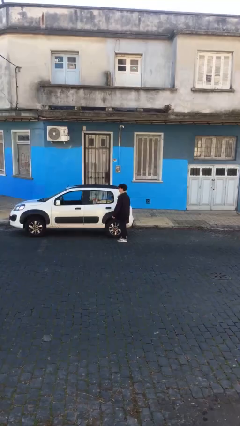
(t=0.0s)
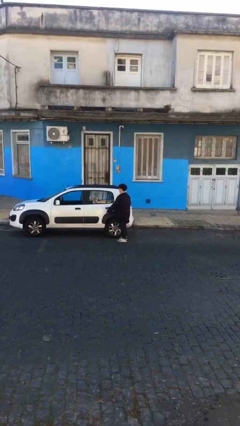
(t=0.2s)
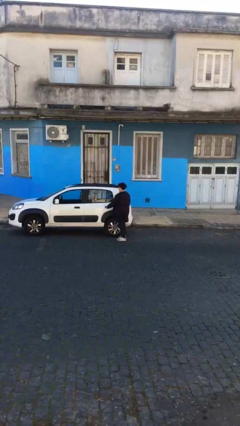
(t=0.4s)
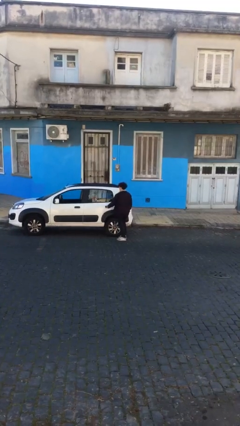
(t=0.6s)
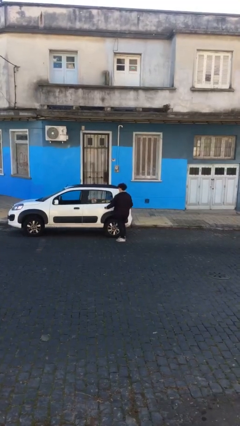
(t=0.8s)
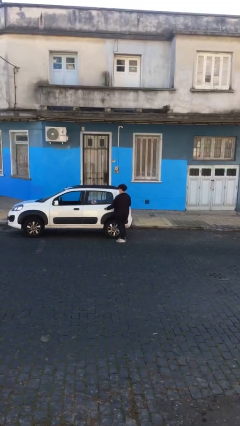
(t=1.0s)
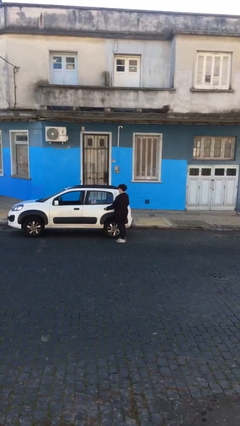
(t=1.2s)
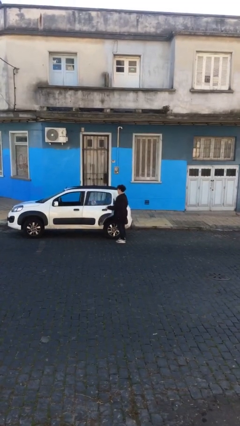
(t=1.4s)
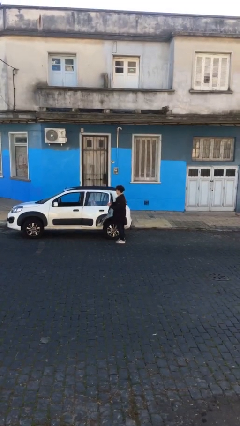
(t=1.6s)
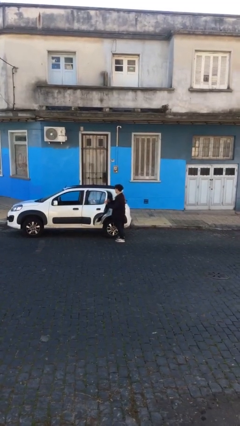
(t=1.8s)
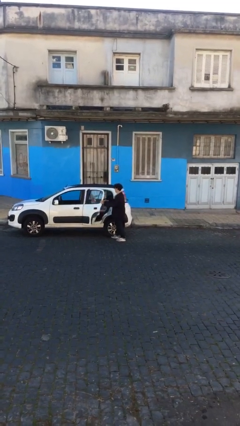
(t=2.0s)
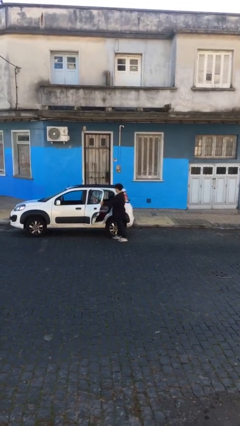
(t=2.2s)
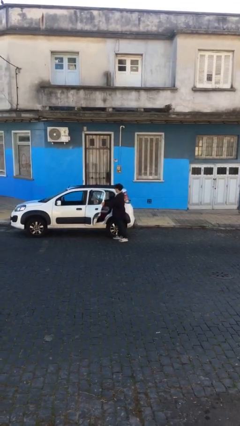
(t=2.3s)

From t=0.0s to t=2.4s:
person opens car door

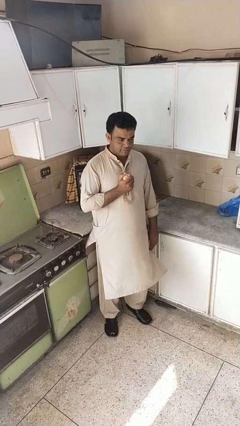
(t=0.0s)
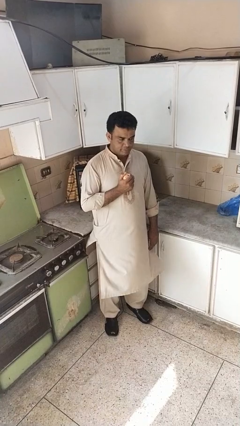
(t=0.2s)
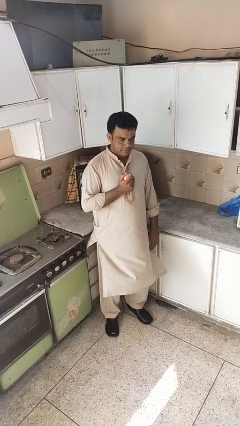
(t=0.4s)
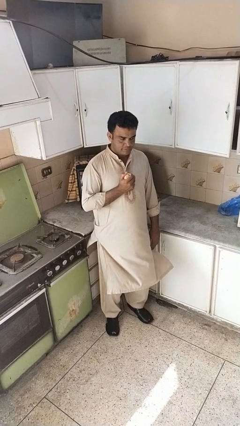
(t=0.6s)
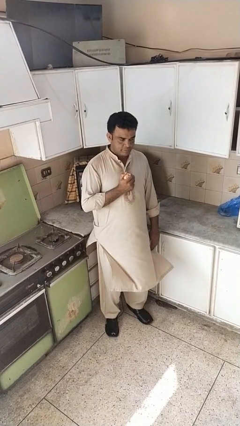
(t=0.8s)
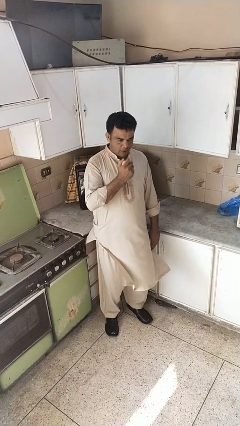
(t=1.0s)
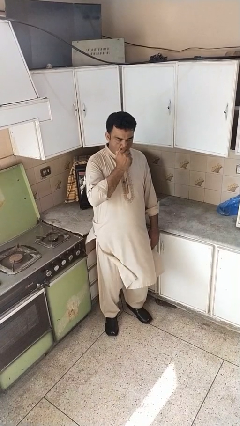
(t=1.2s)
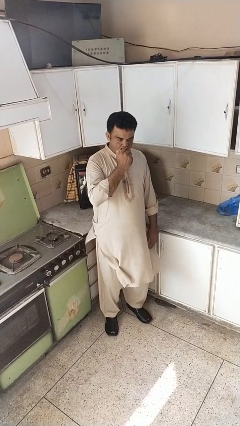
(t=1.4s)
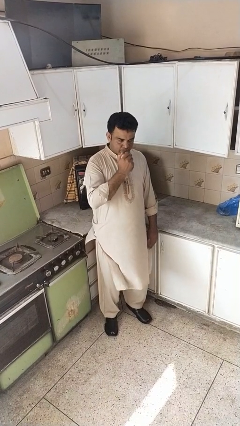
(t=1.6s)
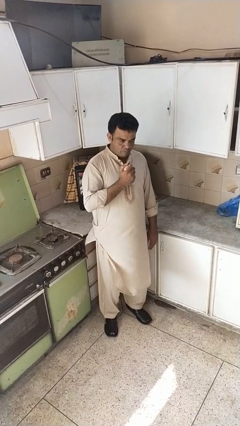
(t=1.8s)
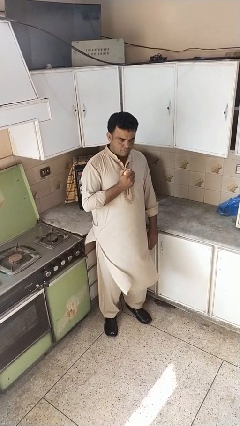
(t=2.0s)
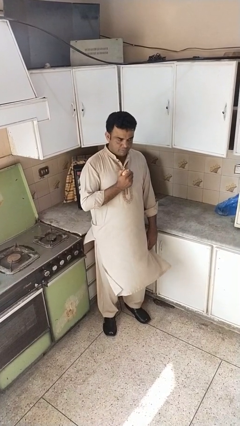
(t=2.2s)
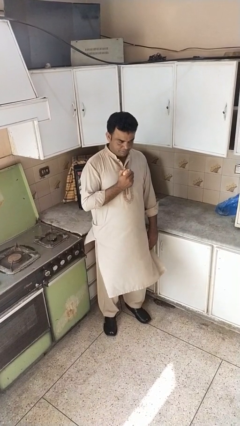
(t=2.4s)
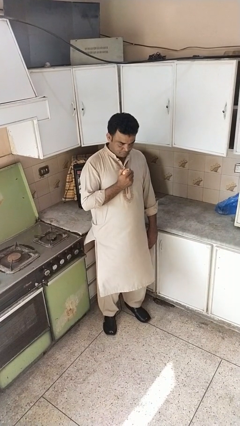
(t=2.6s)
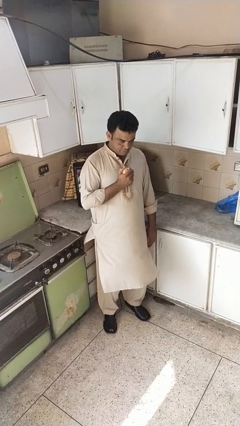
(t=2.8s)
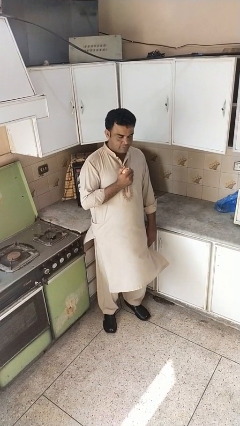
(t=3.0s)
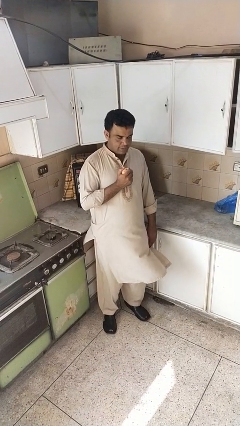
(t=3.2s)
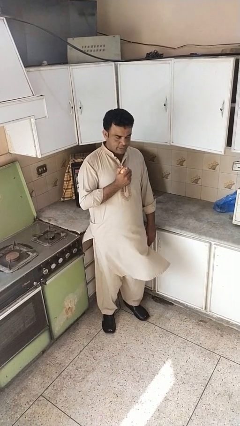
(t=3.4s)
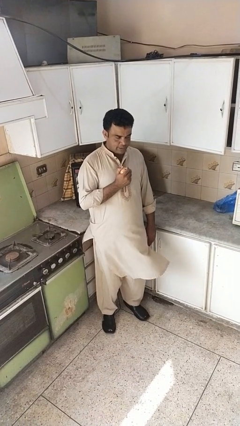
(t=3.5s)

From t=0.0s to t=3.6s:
person eats apple

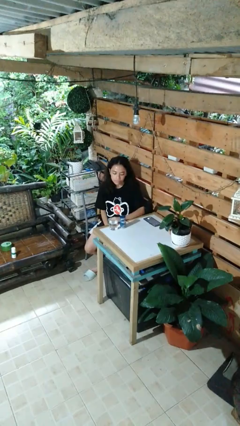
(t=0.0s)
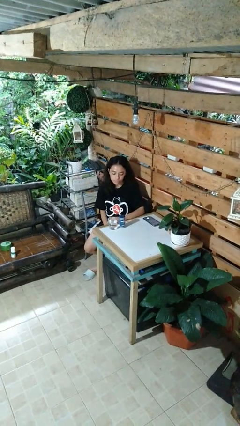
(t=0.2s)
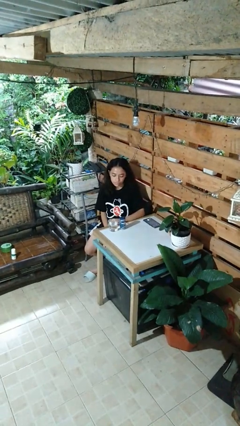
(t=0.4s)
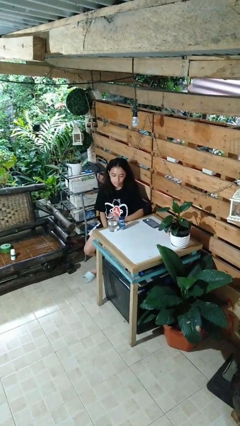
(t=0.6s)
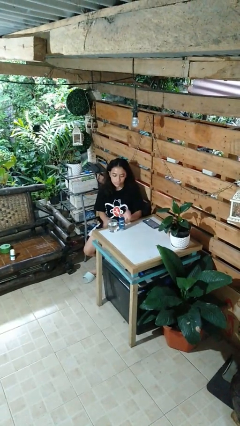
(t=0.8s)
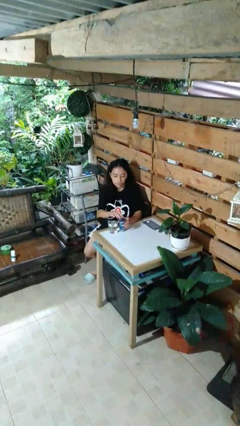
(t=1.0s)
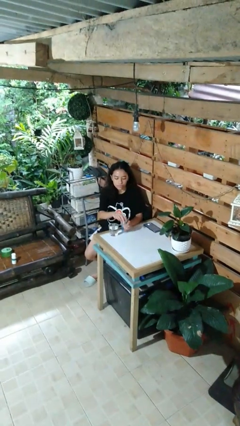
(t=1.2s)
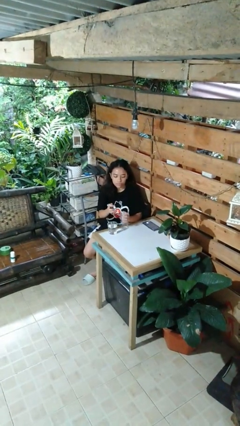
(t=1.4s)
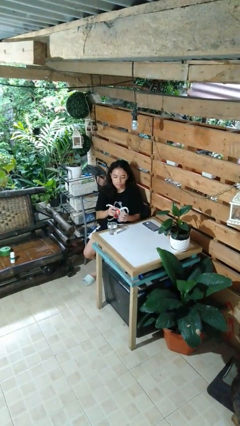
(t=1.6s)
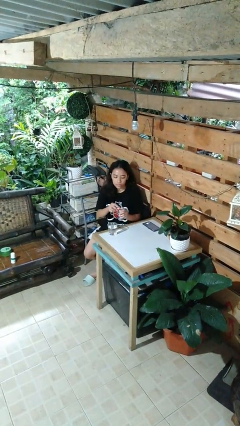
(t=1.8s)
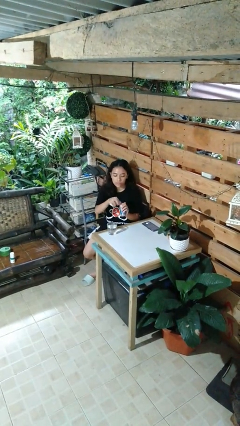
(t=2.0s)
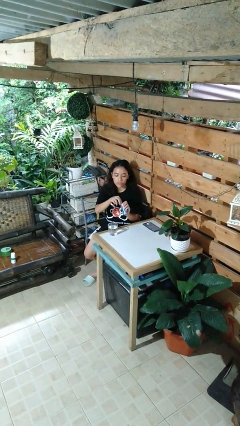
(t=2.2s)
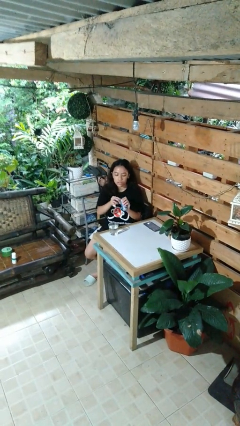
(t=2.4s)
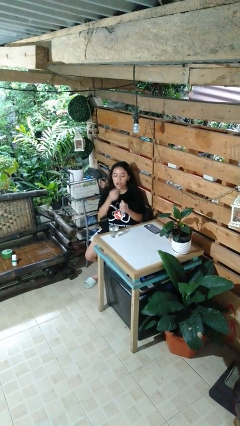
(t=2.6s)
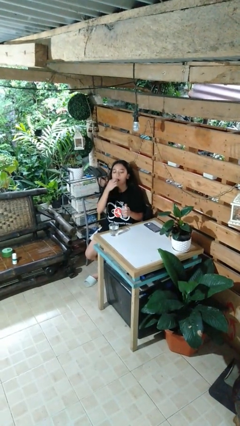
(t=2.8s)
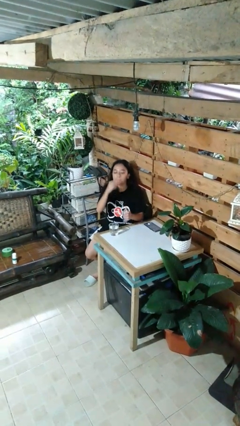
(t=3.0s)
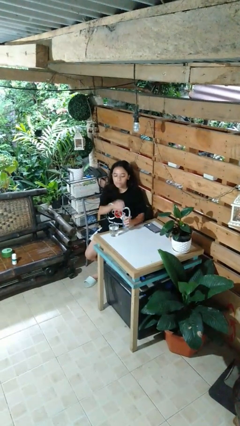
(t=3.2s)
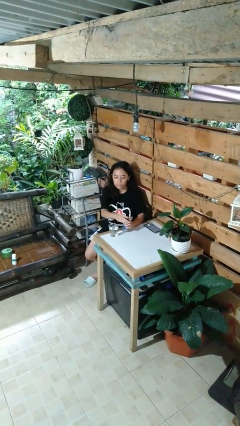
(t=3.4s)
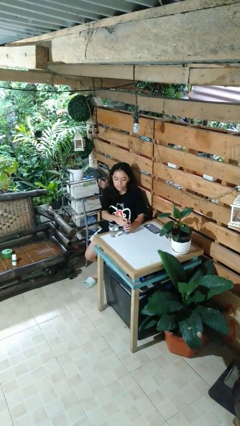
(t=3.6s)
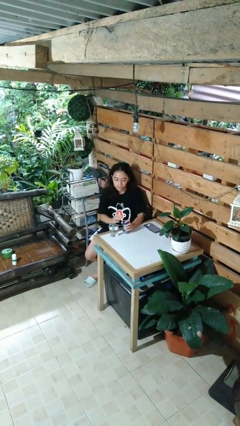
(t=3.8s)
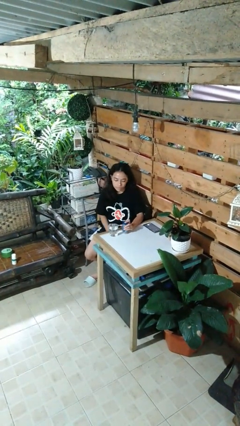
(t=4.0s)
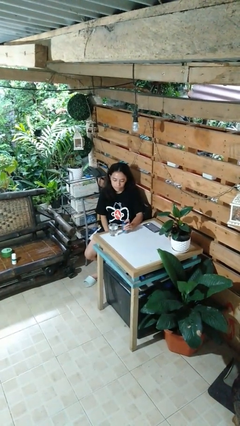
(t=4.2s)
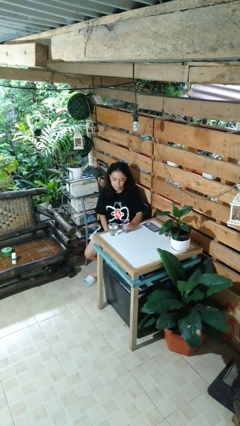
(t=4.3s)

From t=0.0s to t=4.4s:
person takes medicine pills

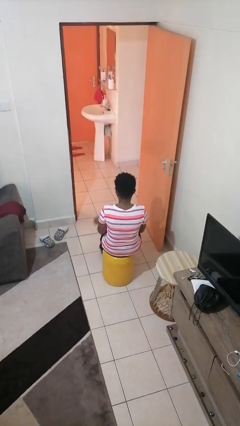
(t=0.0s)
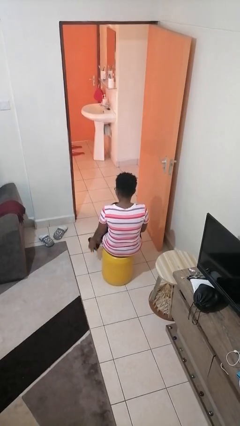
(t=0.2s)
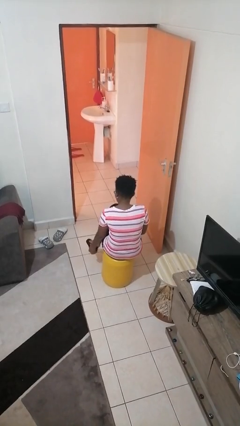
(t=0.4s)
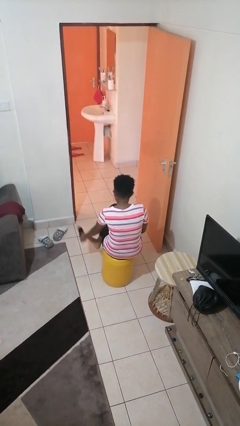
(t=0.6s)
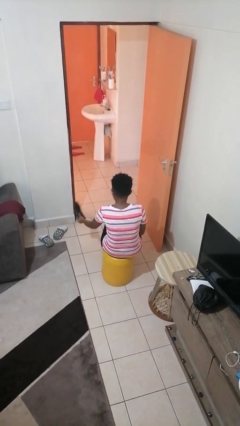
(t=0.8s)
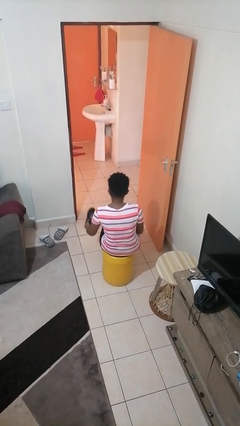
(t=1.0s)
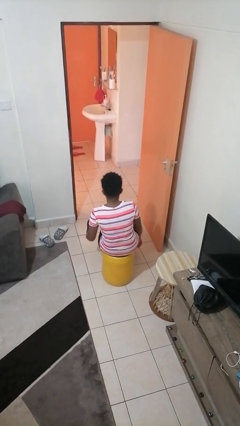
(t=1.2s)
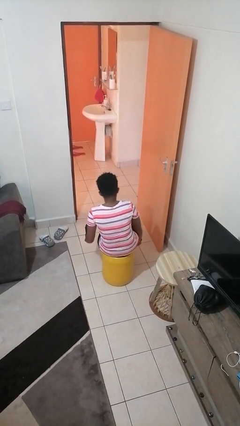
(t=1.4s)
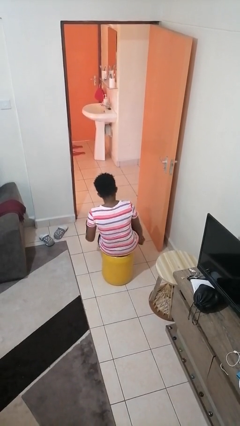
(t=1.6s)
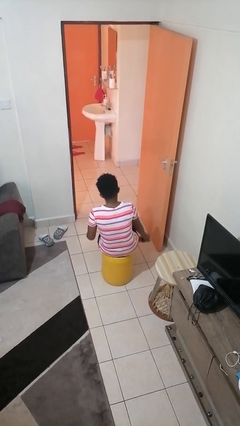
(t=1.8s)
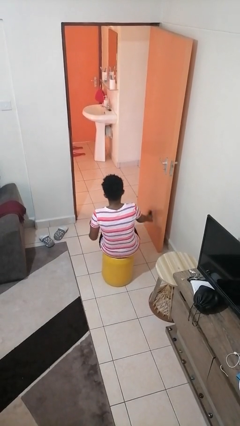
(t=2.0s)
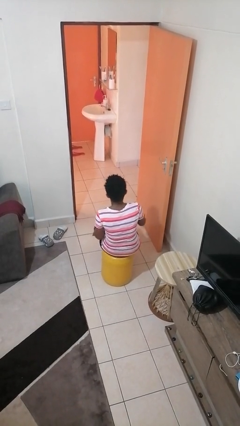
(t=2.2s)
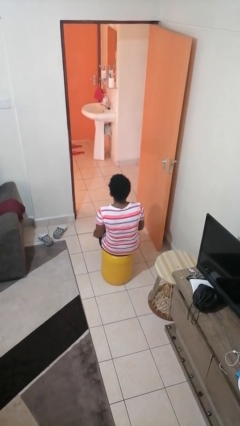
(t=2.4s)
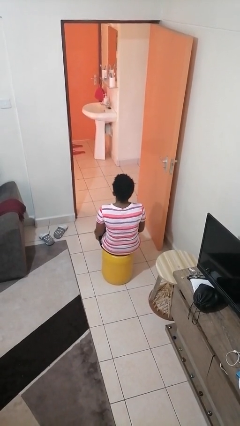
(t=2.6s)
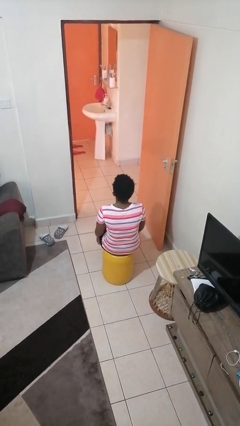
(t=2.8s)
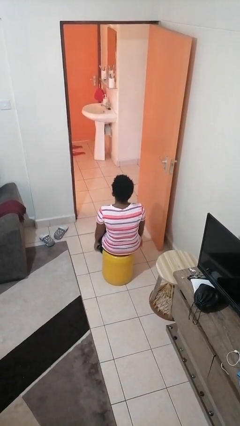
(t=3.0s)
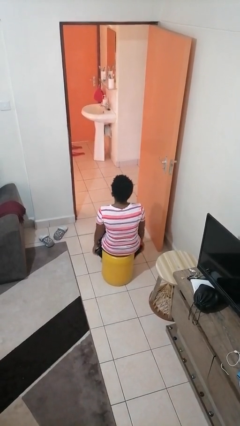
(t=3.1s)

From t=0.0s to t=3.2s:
person takes off shoes

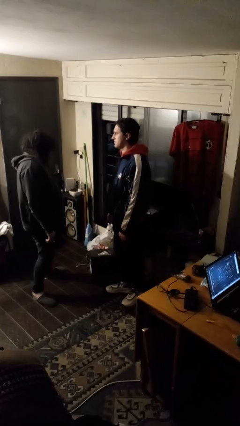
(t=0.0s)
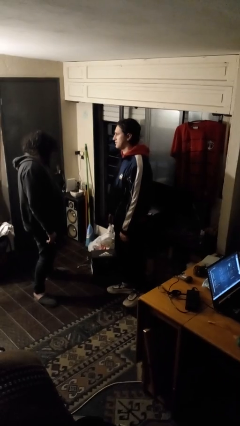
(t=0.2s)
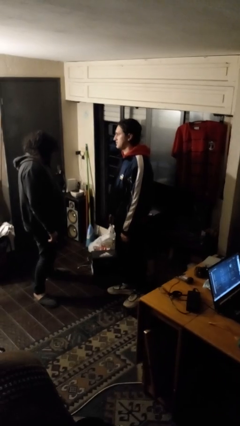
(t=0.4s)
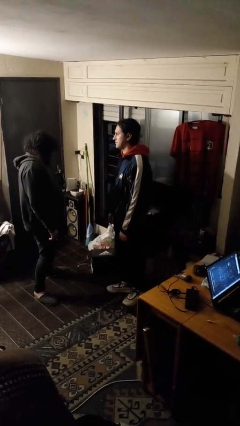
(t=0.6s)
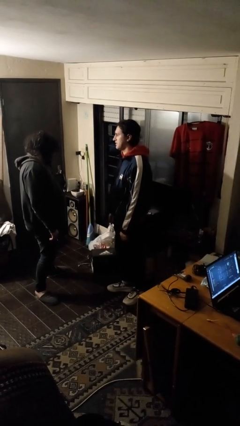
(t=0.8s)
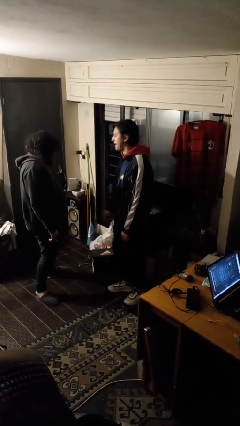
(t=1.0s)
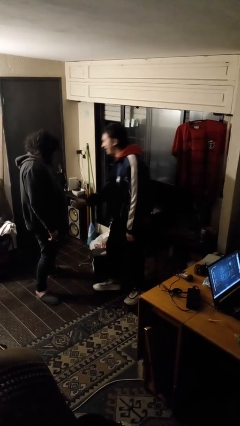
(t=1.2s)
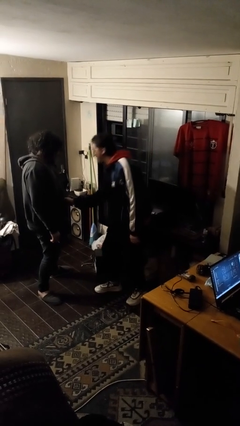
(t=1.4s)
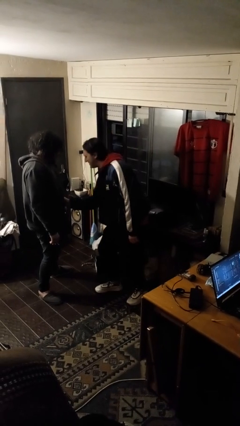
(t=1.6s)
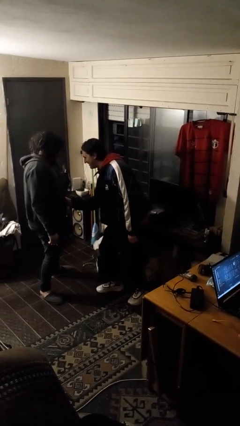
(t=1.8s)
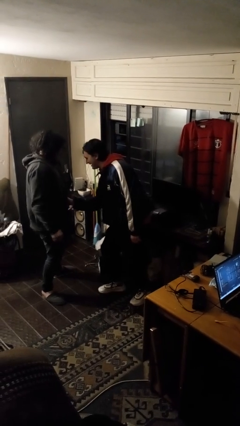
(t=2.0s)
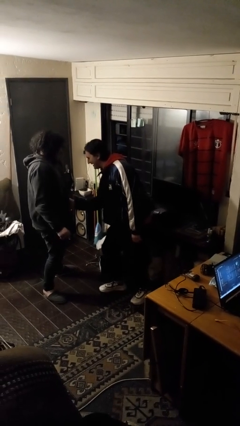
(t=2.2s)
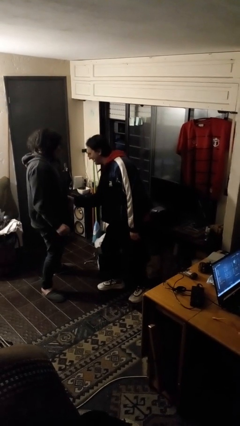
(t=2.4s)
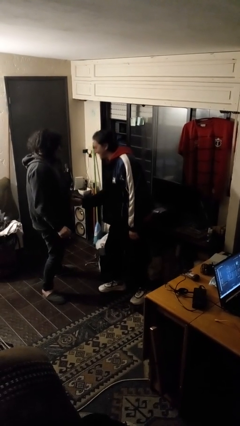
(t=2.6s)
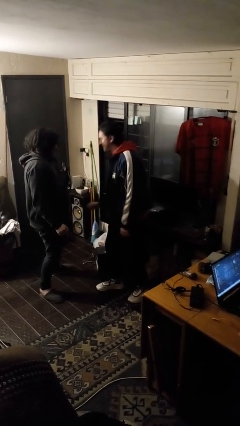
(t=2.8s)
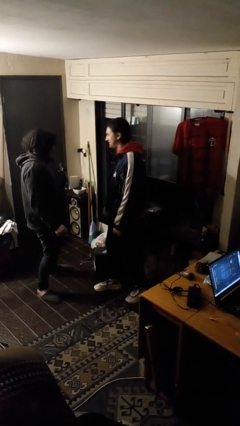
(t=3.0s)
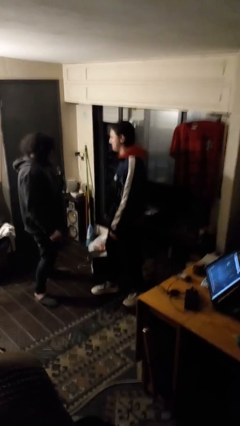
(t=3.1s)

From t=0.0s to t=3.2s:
person tickles person

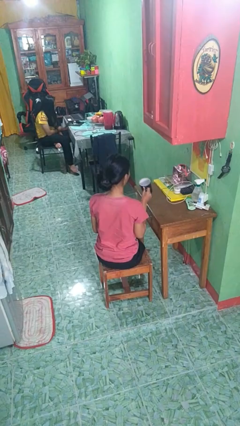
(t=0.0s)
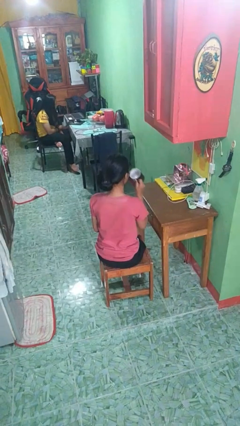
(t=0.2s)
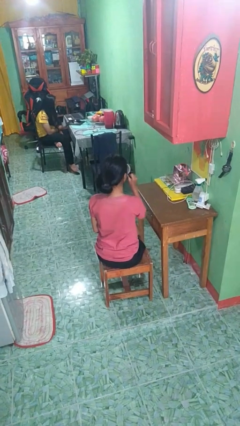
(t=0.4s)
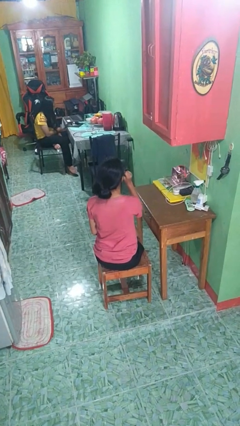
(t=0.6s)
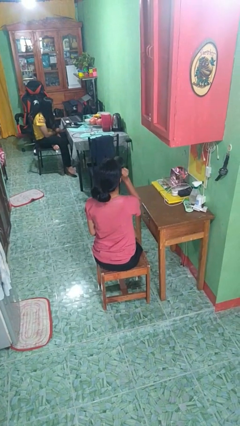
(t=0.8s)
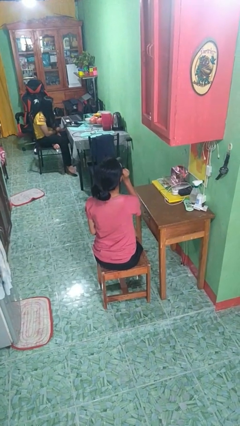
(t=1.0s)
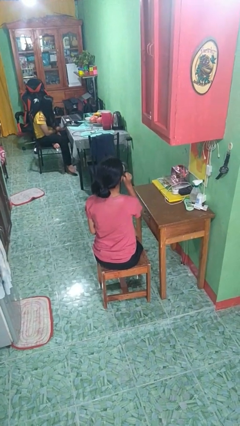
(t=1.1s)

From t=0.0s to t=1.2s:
person drinks from mug
